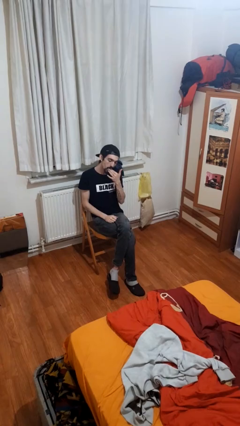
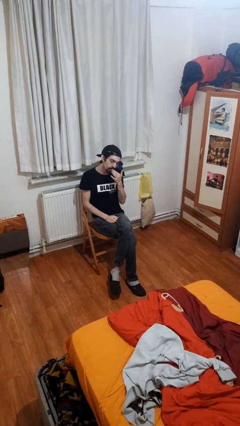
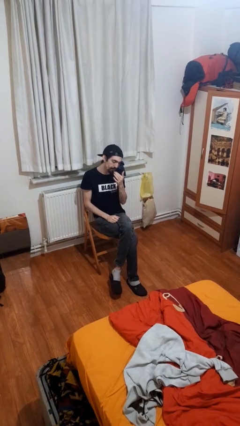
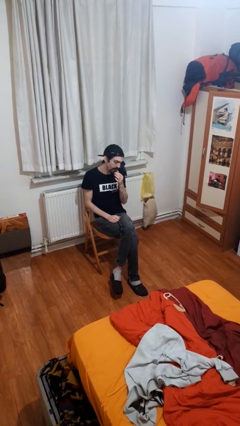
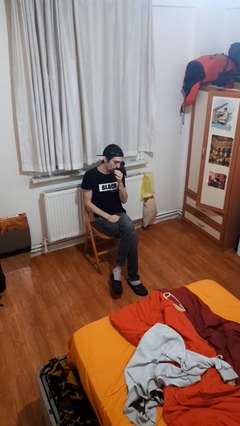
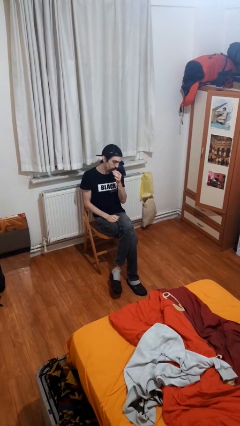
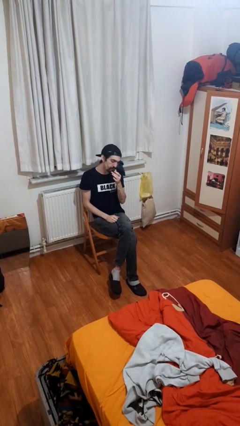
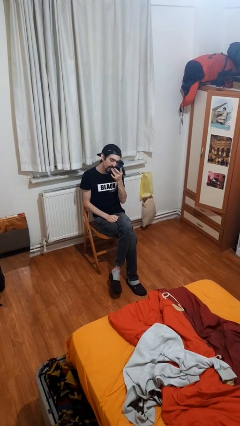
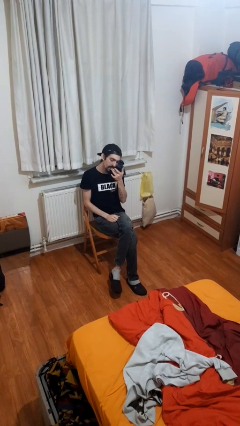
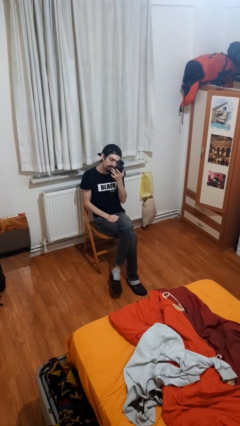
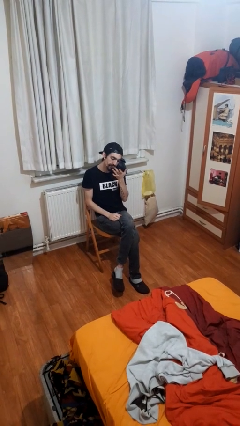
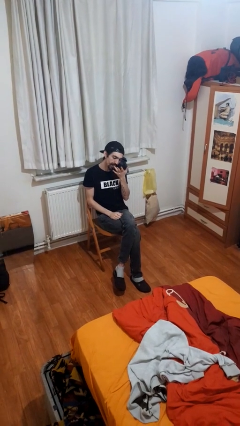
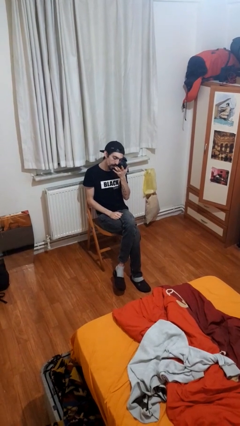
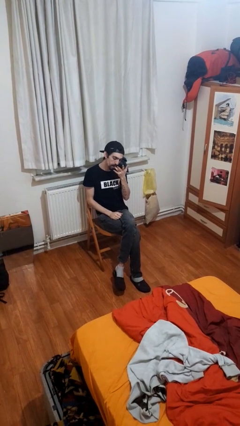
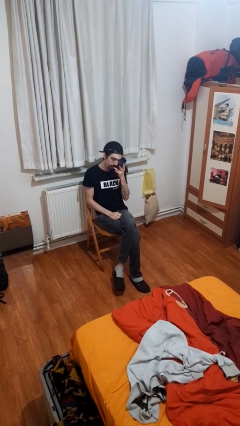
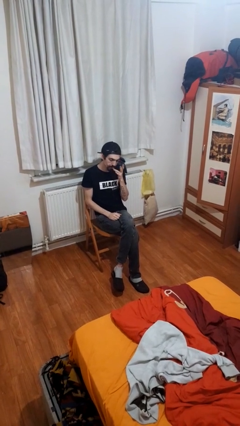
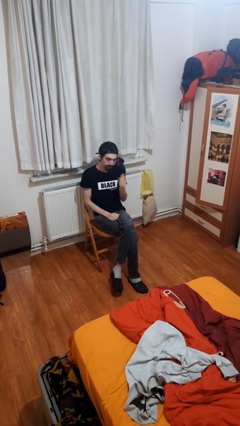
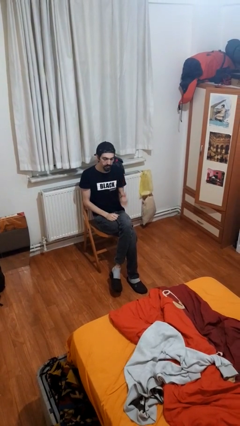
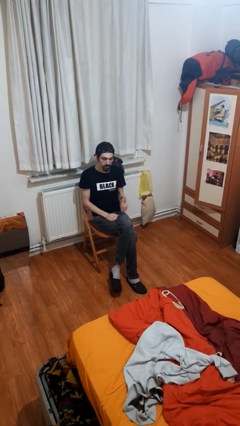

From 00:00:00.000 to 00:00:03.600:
person licks fingers

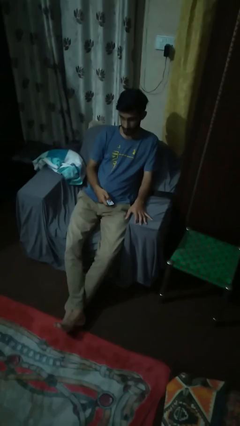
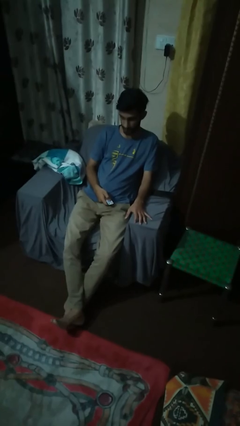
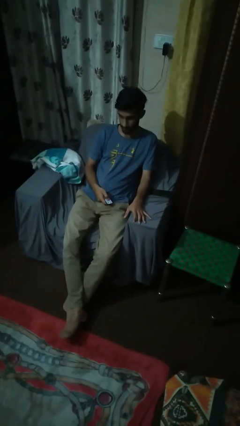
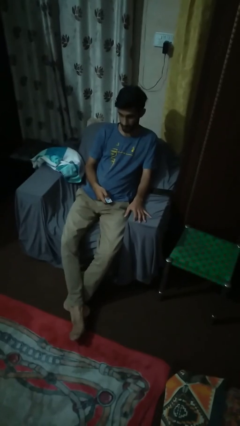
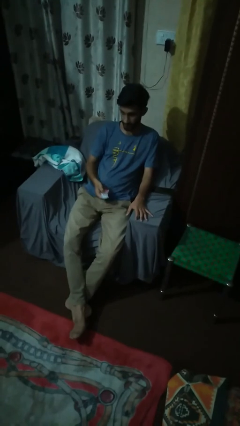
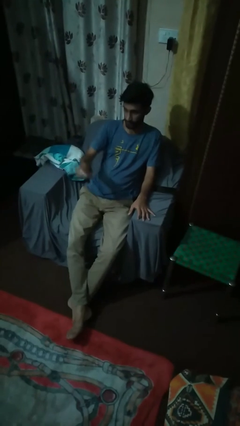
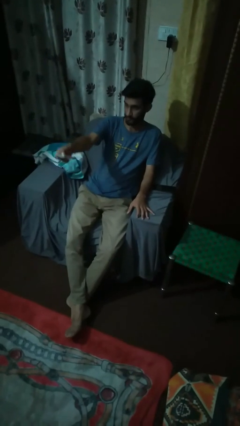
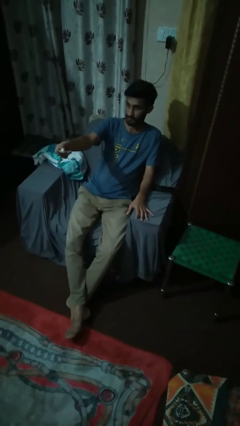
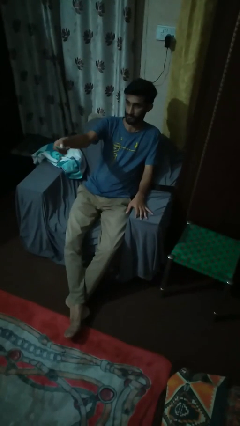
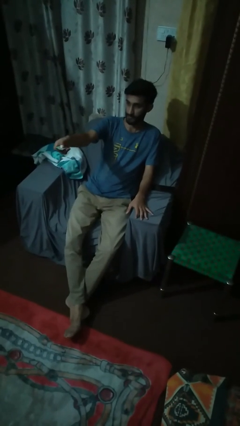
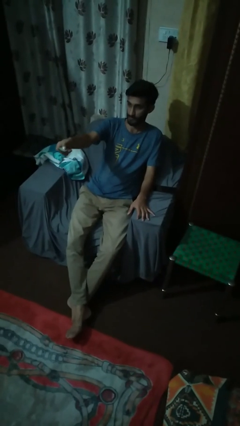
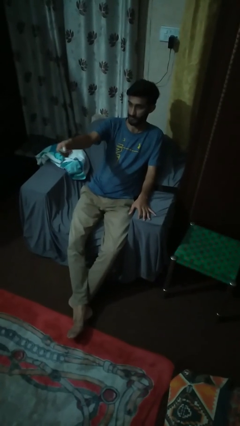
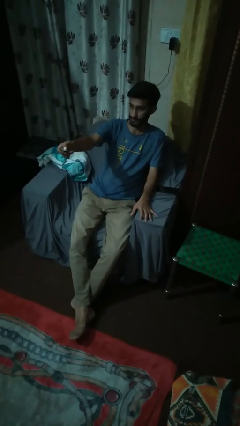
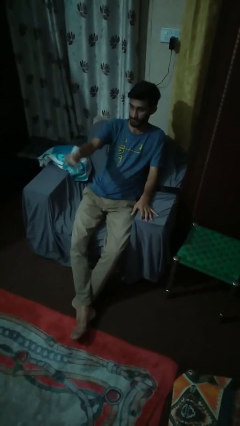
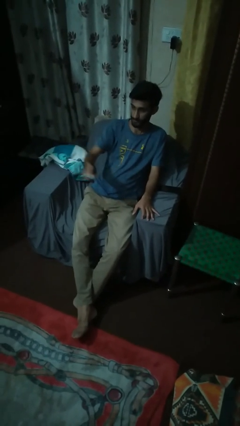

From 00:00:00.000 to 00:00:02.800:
person uses television remote

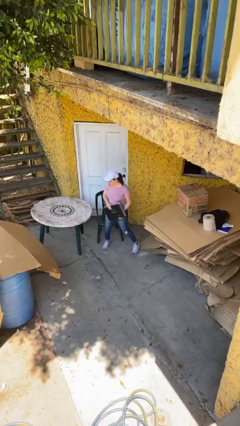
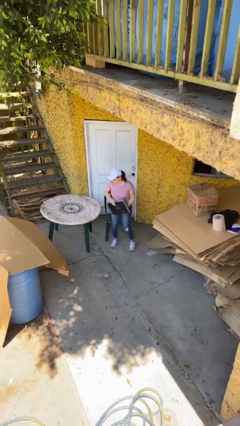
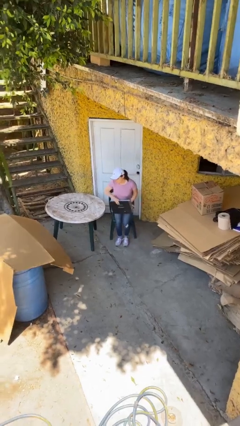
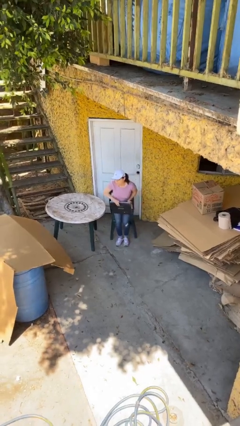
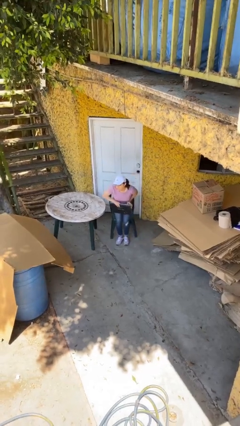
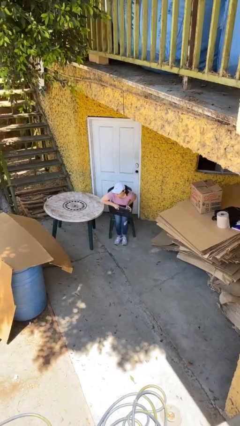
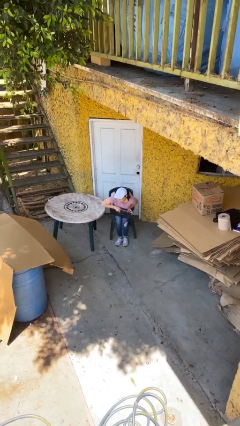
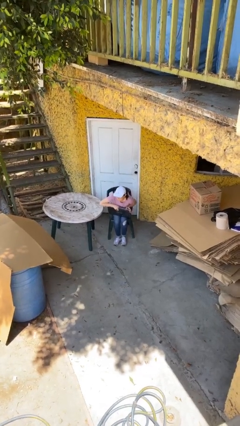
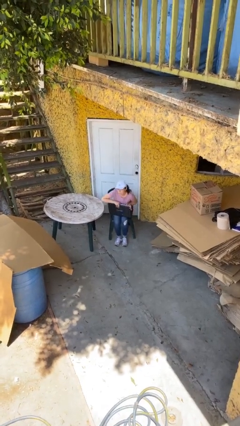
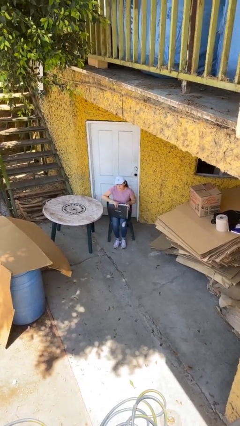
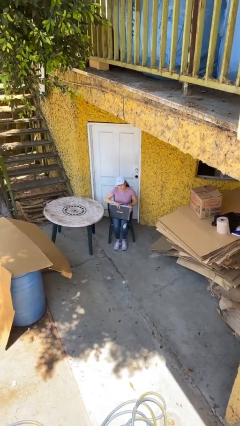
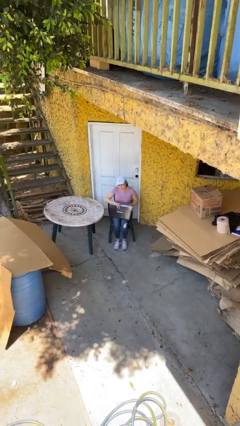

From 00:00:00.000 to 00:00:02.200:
person sits down

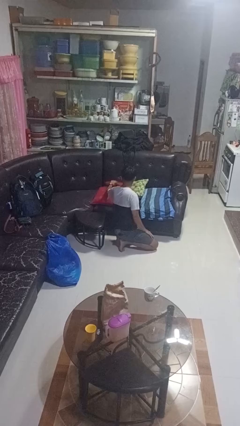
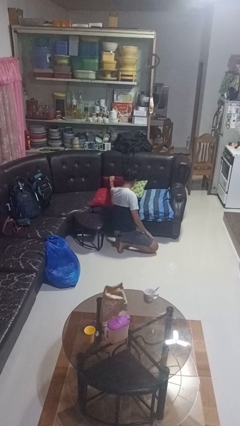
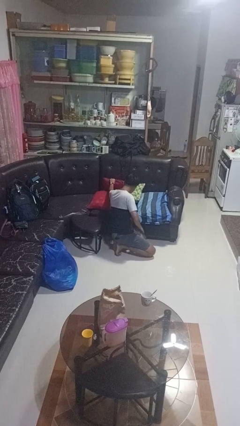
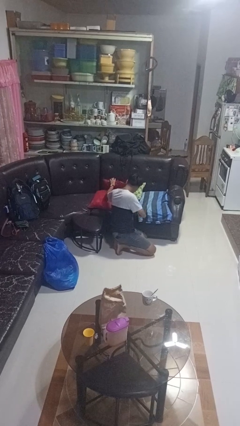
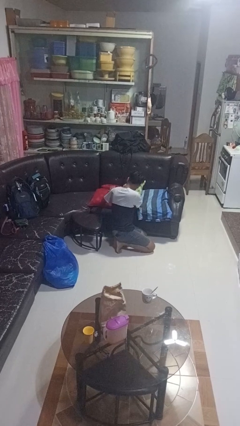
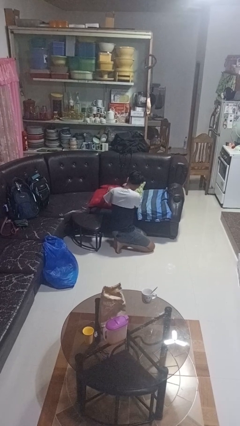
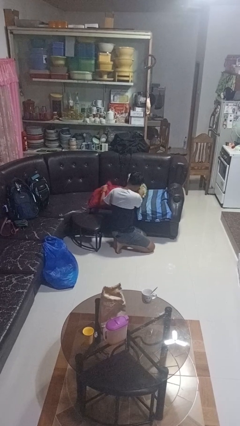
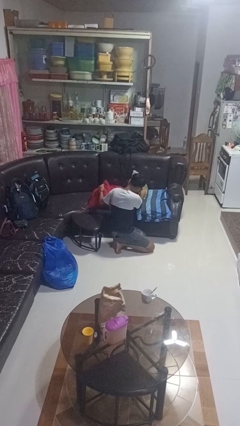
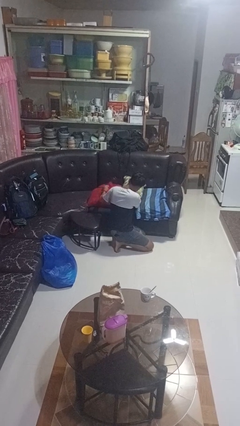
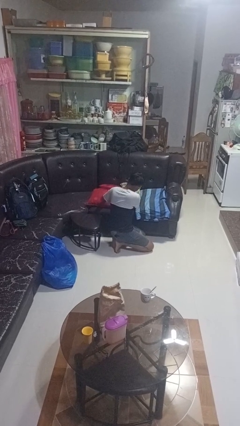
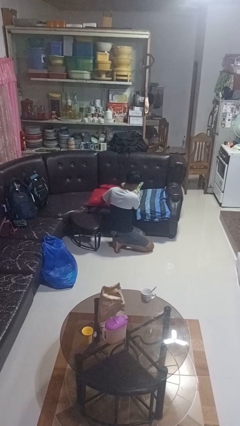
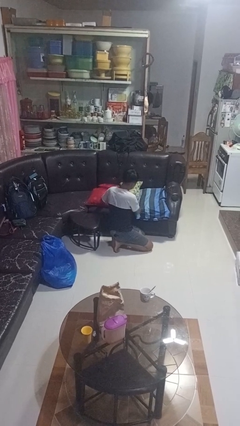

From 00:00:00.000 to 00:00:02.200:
person searches in couch

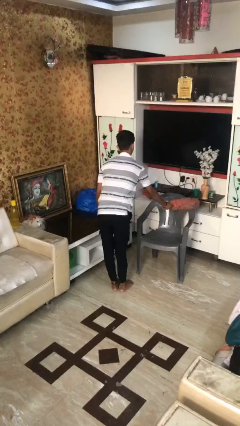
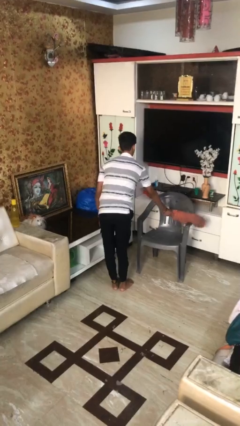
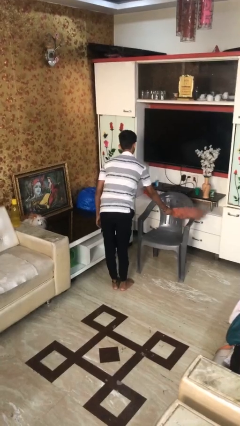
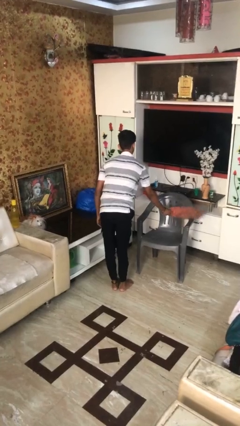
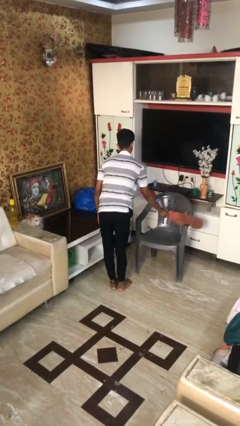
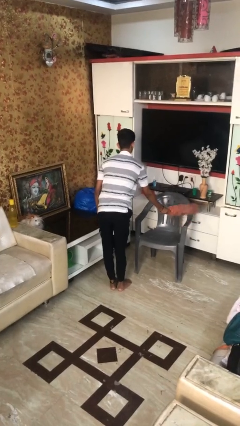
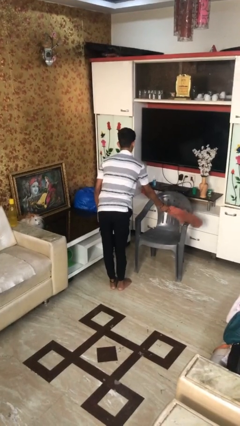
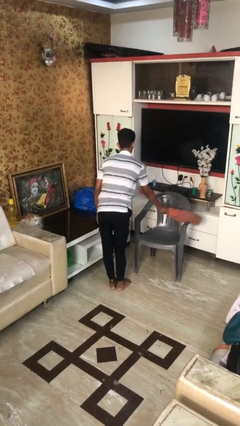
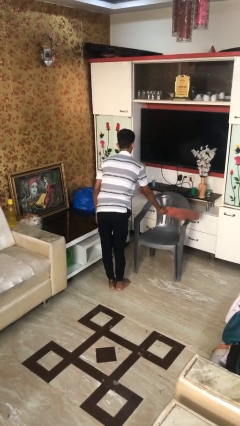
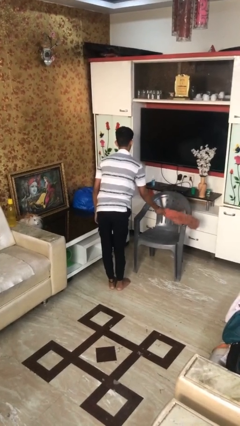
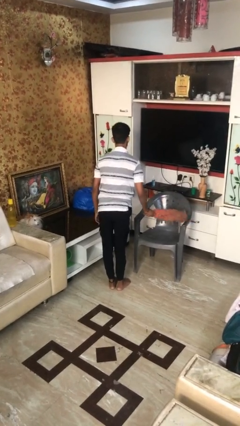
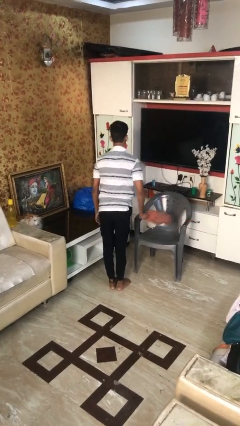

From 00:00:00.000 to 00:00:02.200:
person dusts furniture

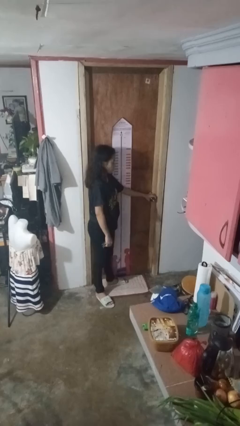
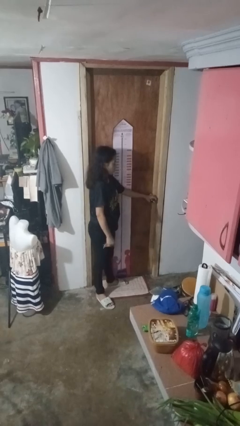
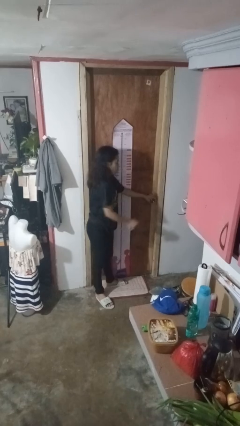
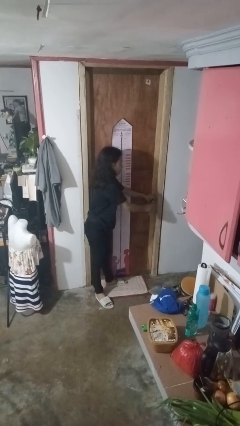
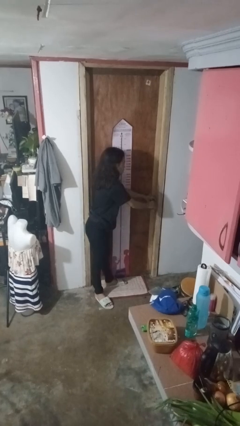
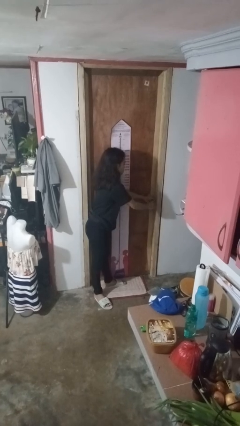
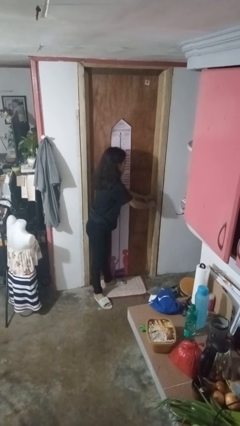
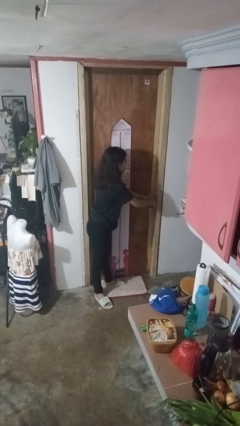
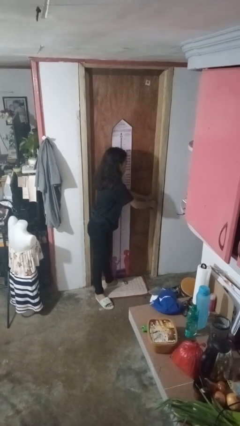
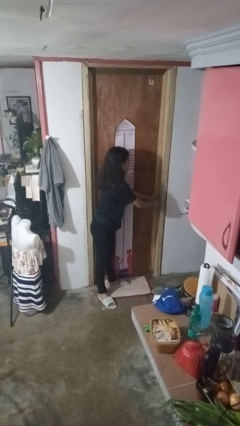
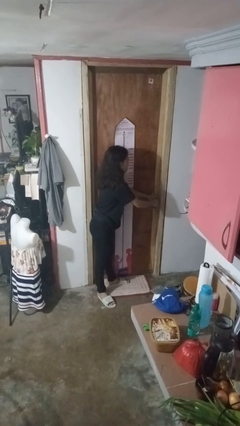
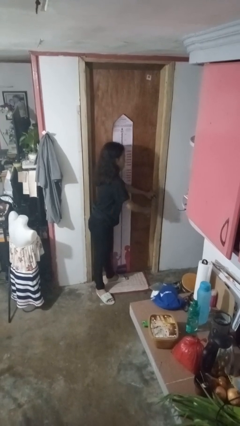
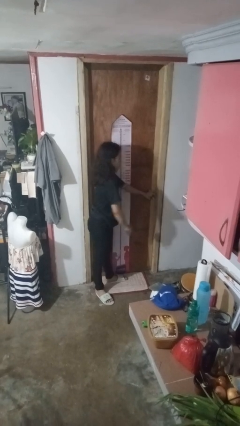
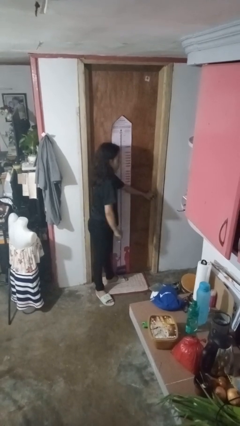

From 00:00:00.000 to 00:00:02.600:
person locks door with keys

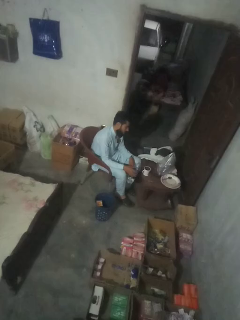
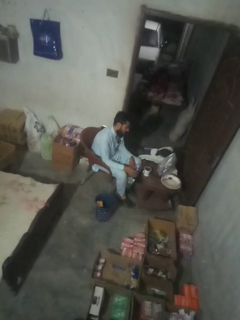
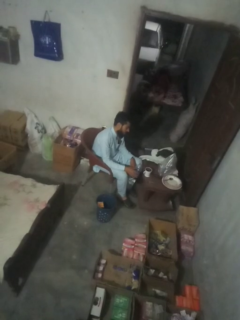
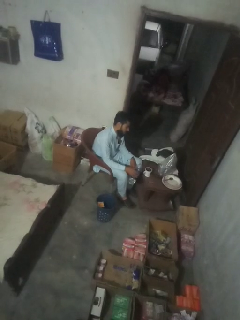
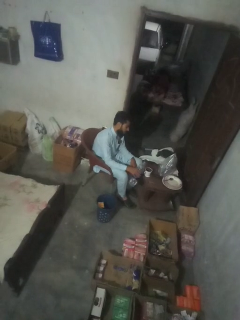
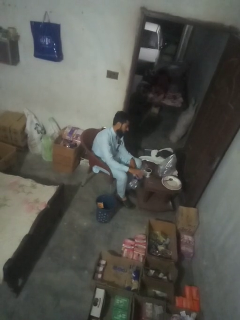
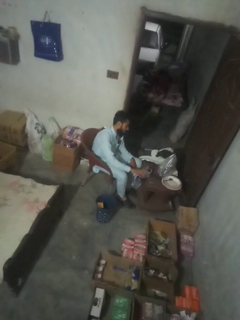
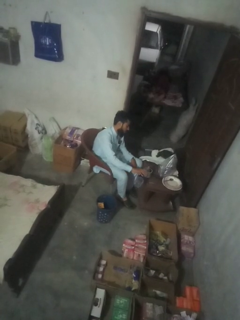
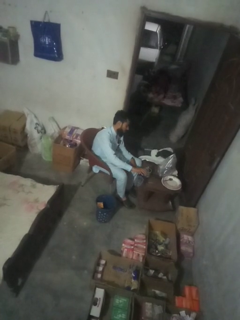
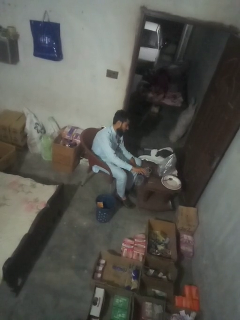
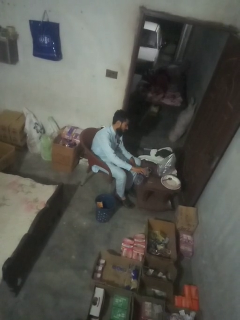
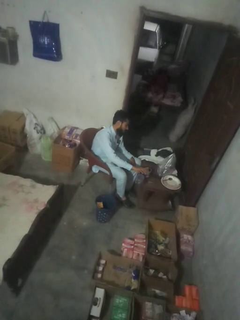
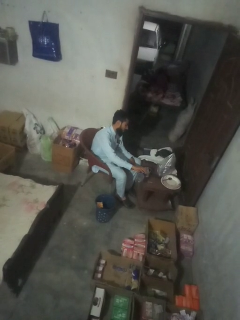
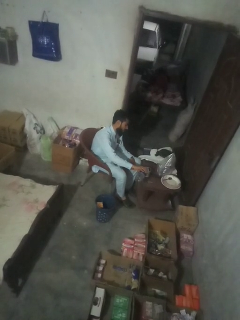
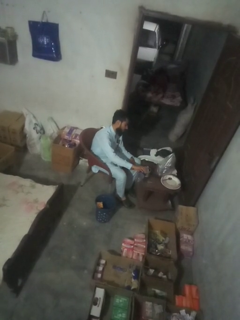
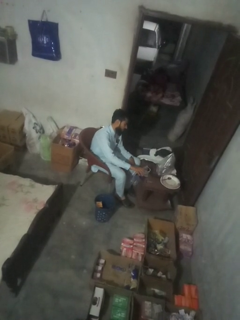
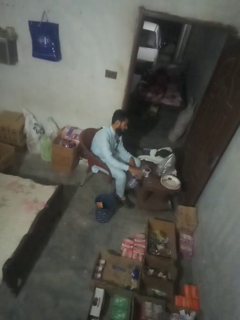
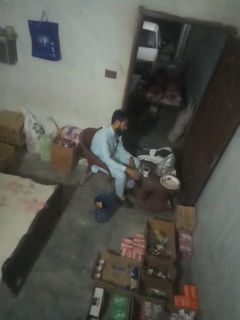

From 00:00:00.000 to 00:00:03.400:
person pours liquid into cup
